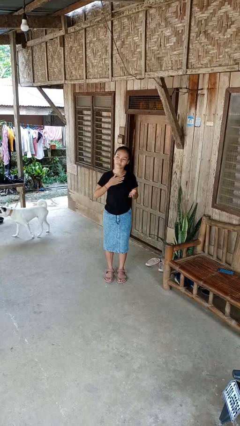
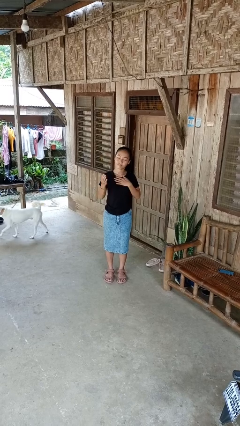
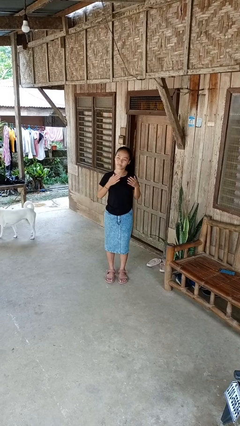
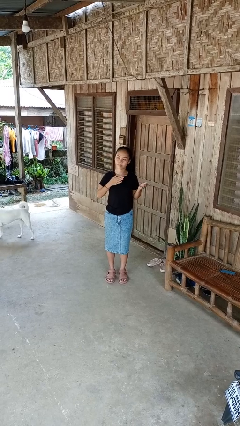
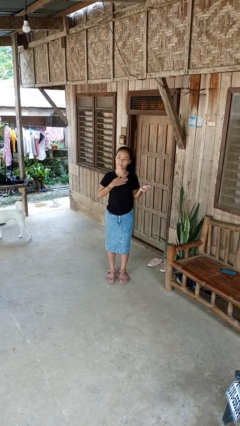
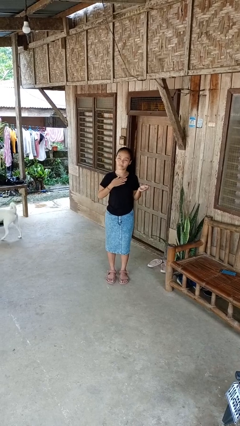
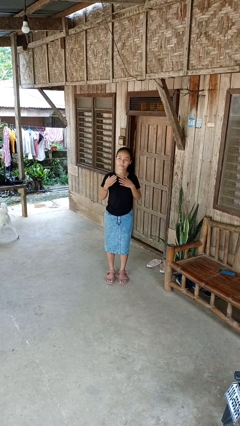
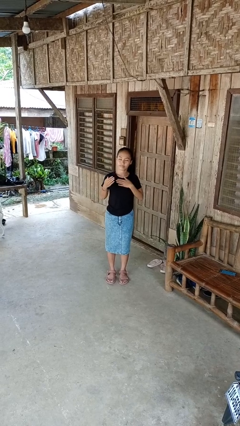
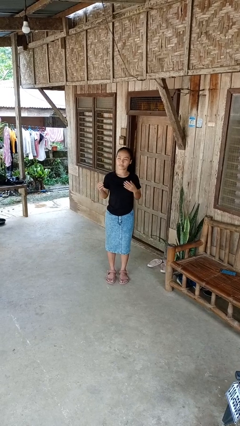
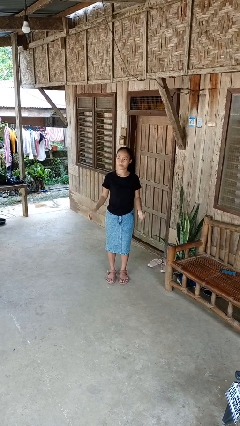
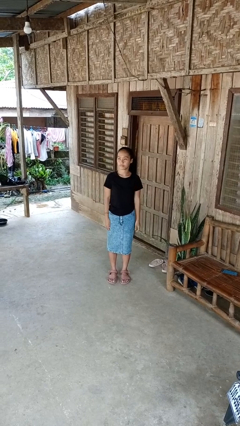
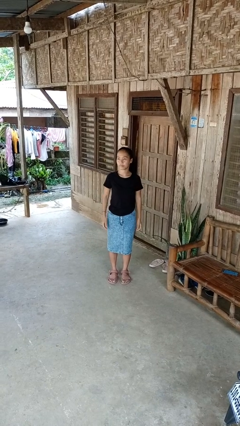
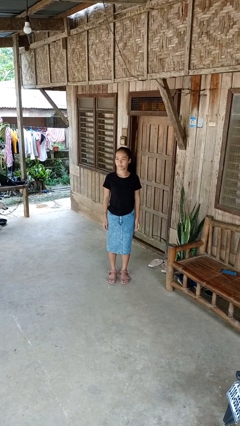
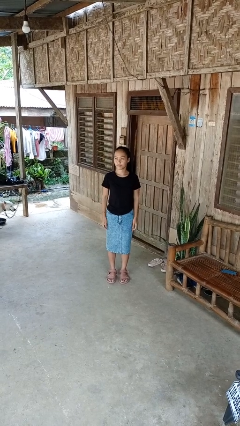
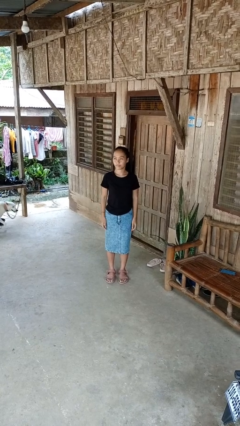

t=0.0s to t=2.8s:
person drums on chest

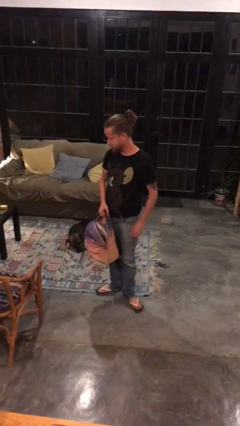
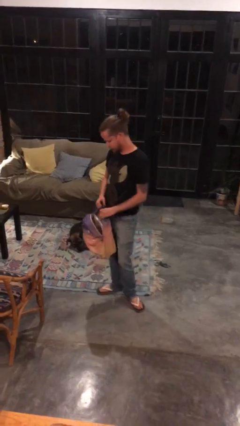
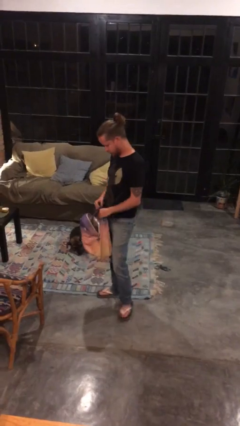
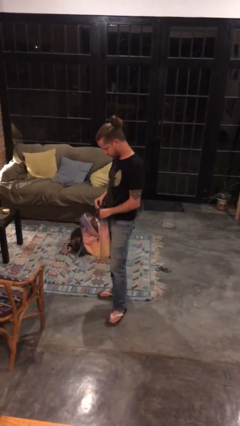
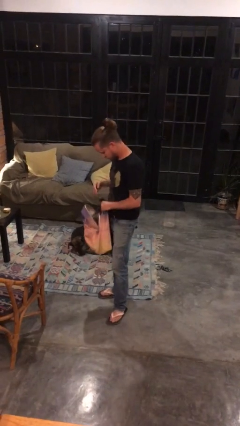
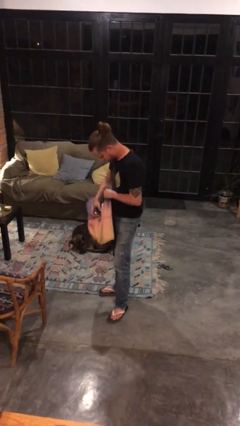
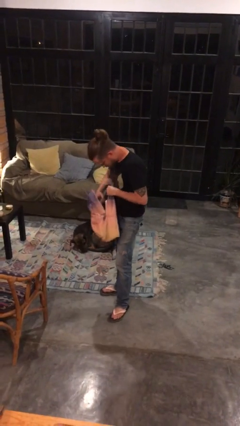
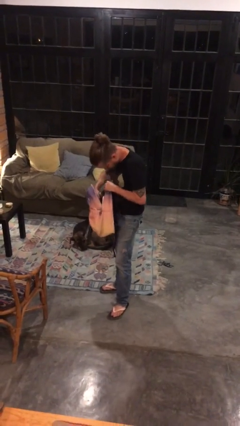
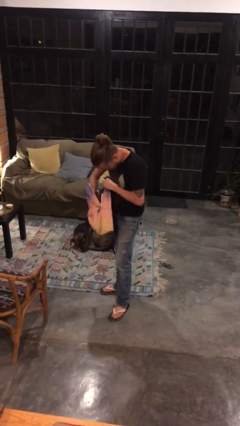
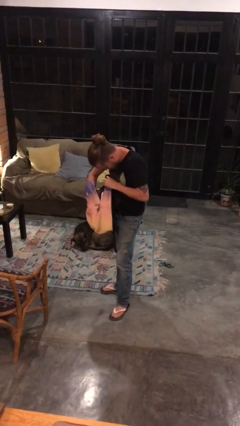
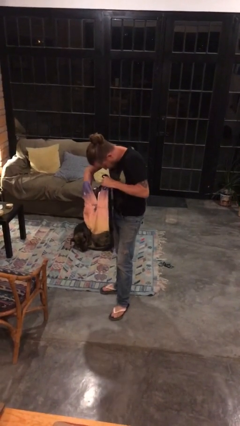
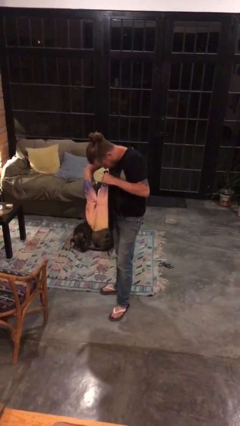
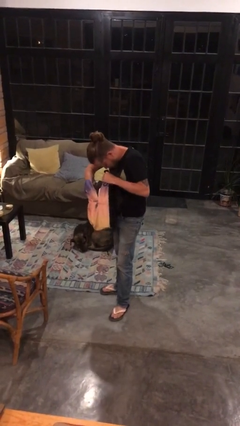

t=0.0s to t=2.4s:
person searches in backpack

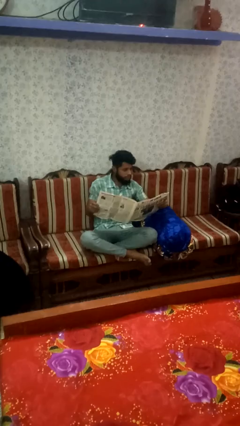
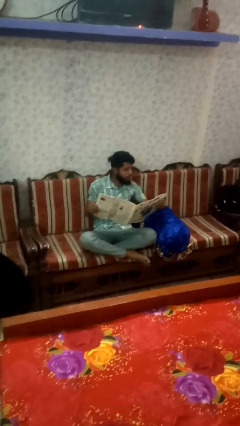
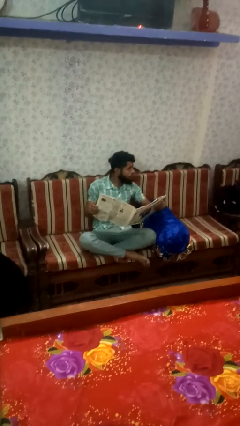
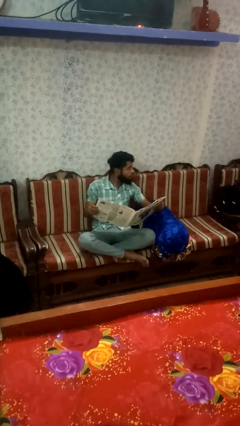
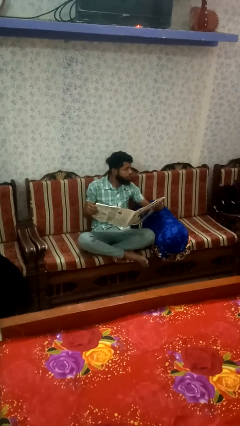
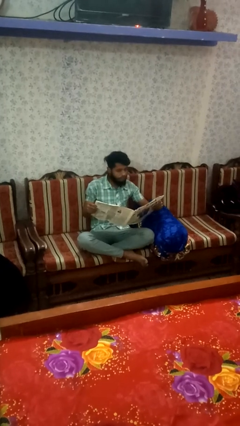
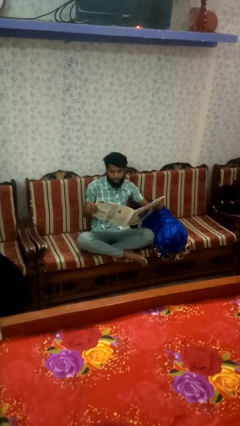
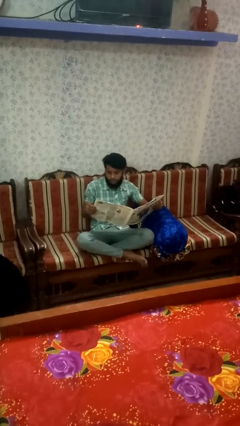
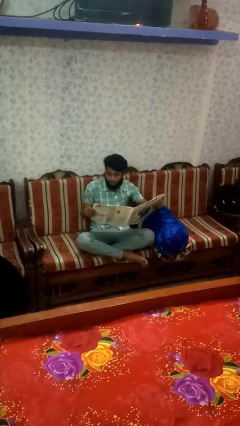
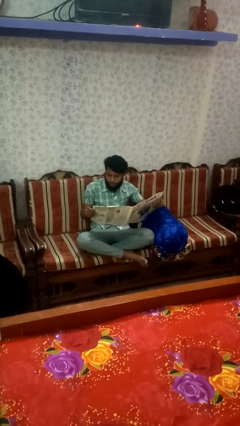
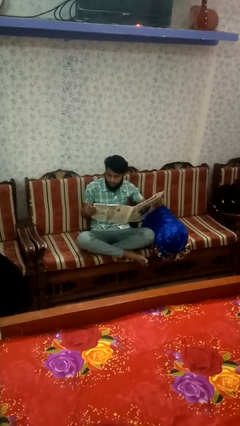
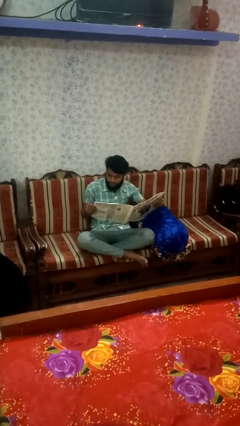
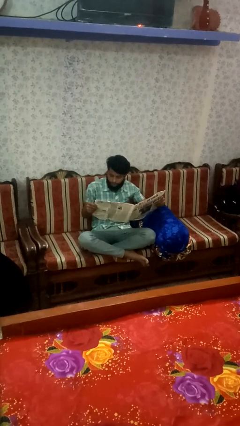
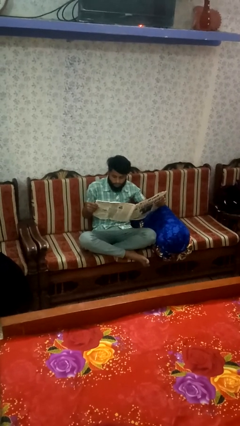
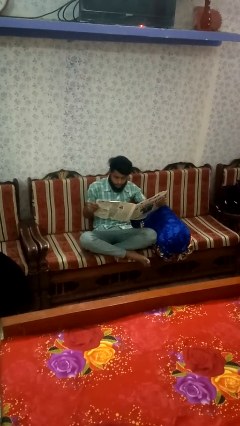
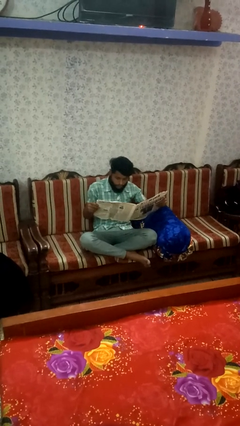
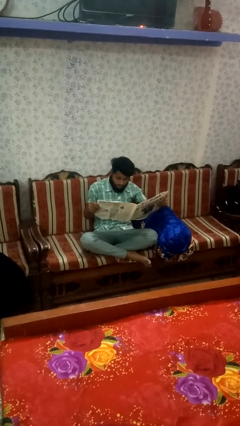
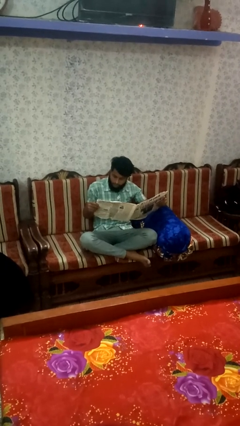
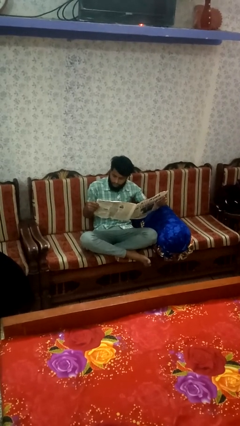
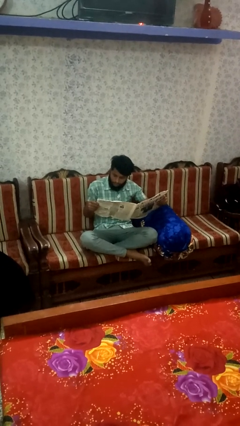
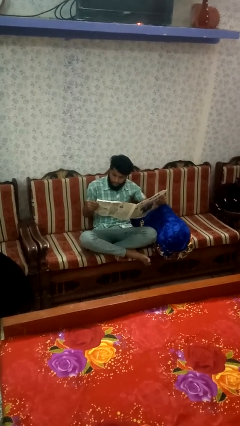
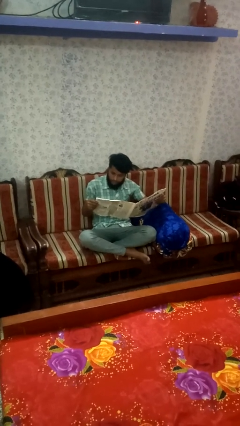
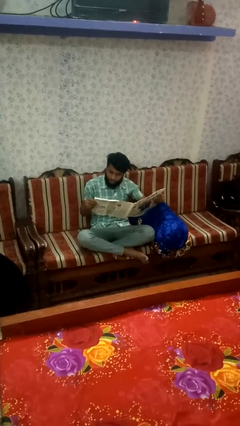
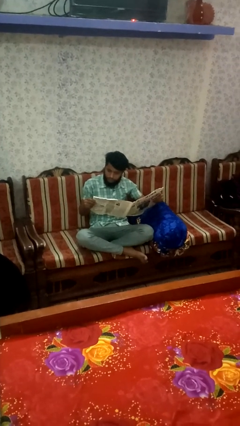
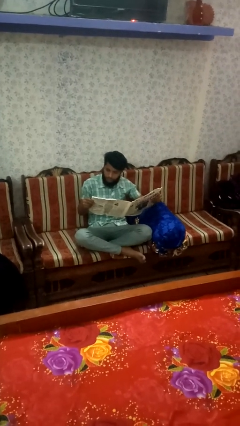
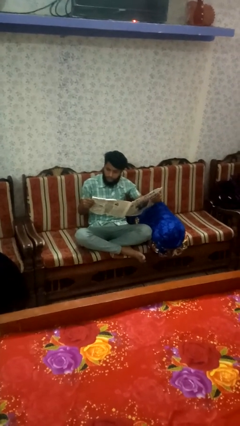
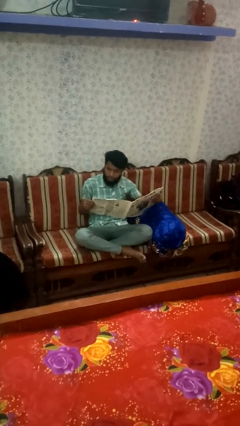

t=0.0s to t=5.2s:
person reads newspaper

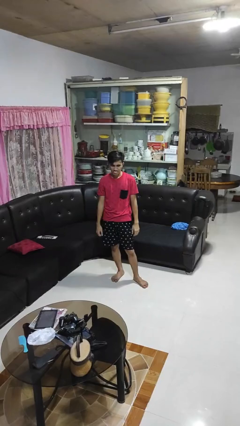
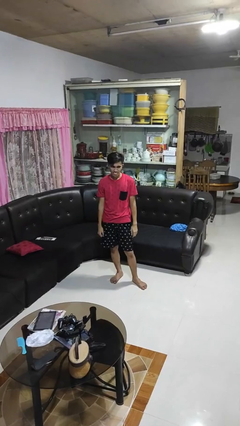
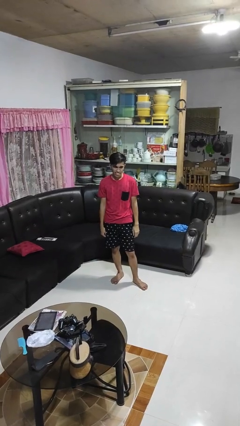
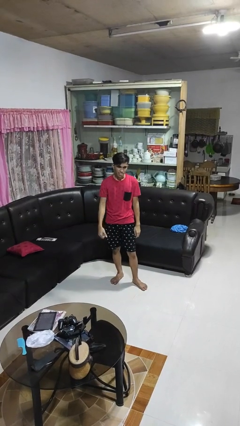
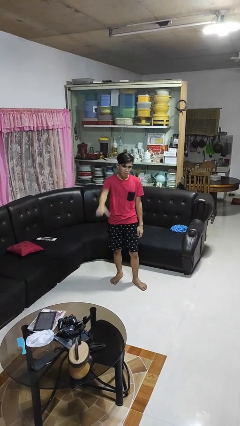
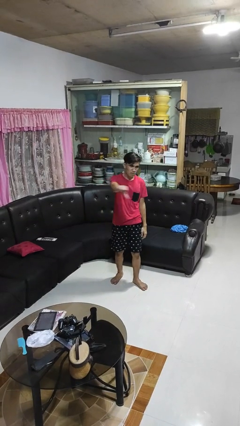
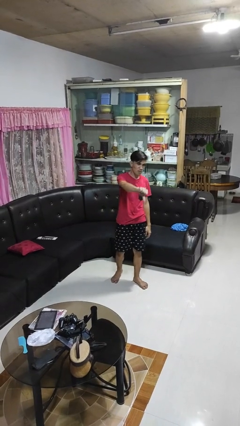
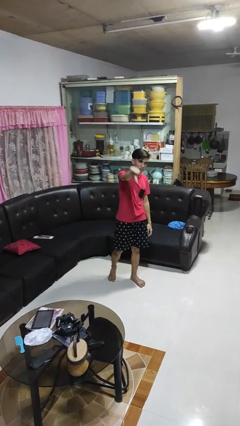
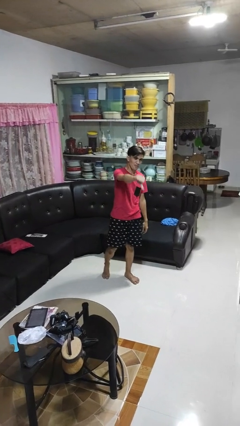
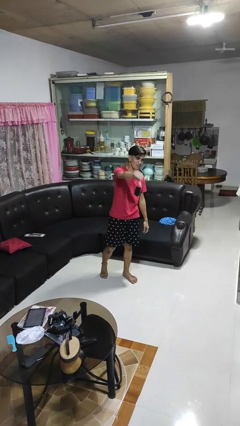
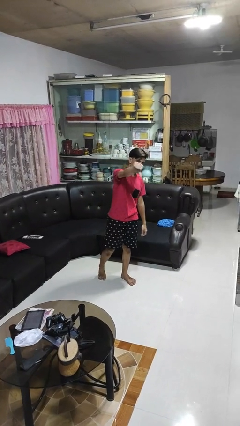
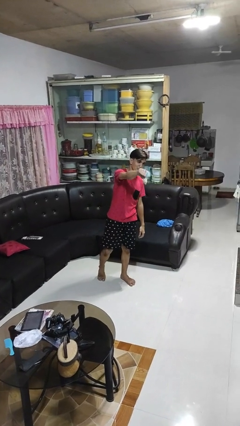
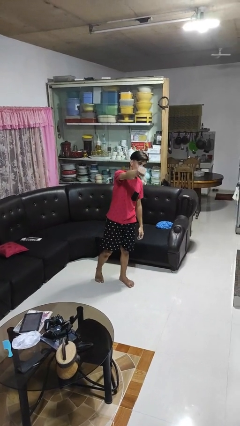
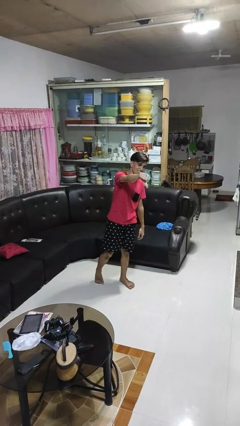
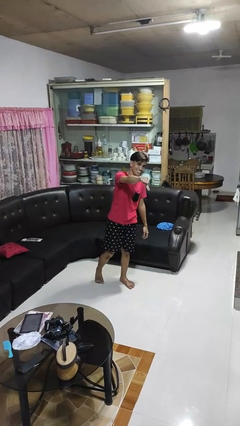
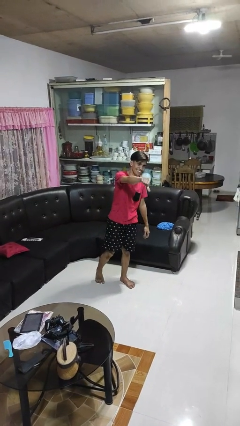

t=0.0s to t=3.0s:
person gestures thumbs down

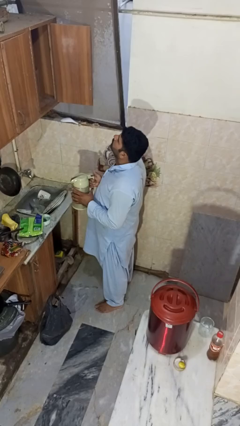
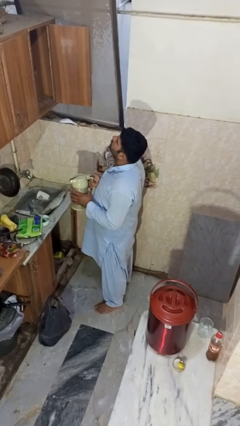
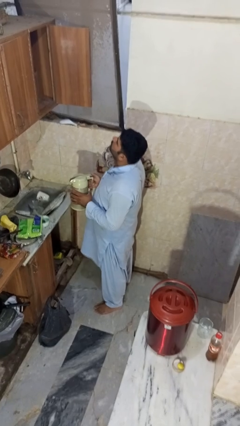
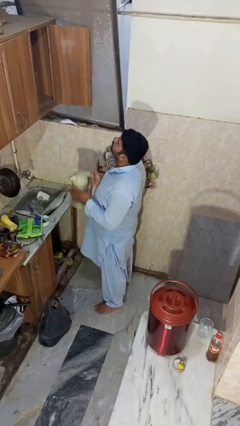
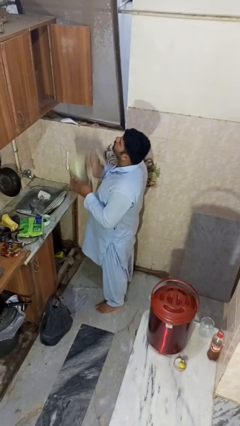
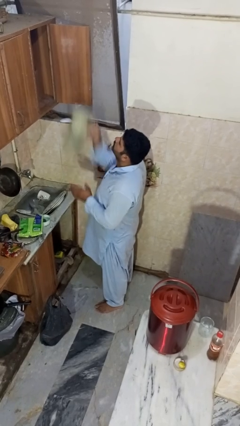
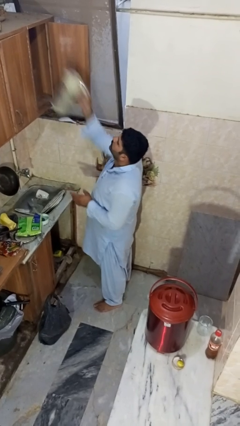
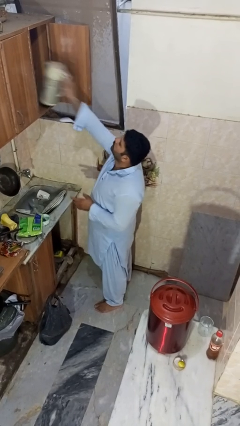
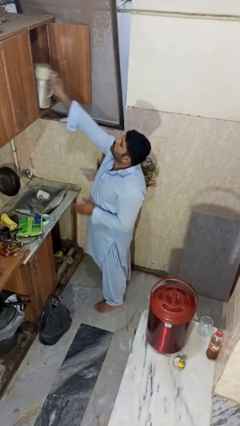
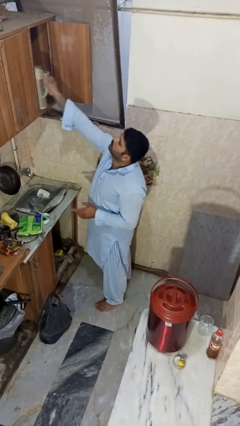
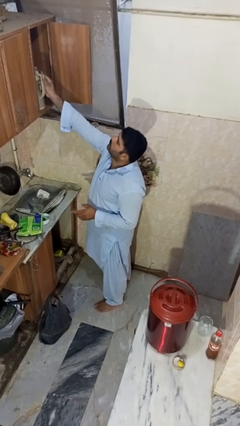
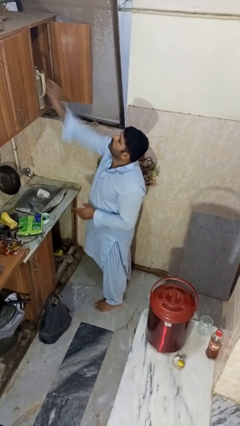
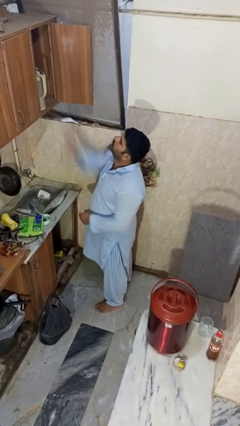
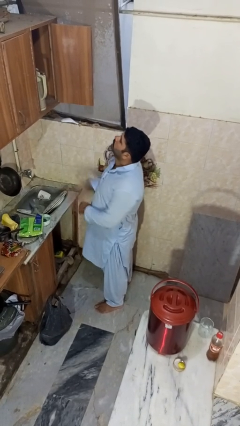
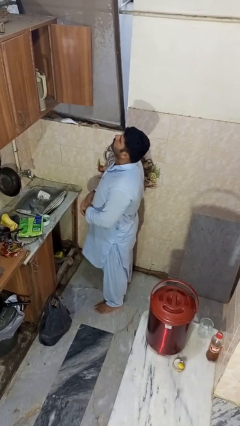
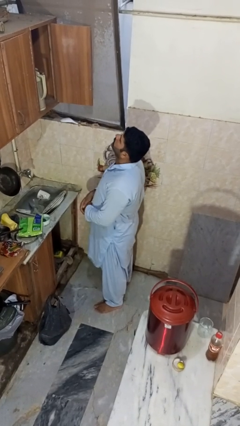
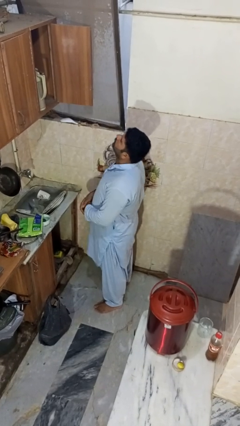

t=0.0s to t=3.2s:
person puts object in cabinet

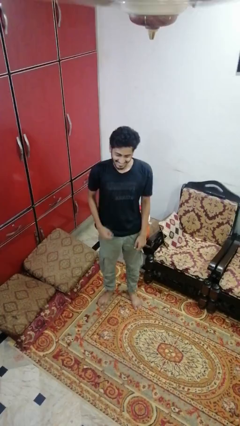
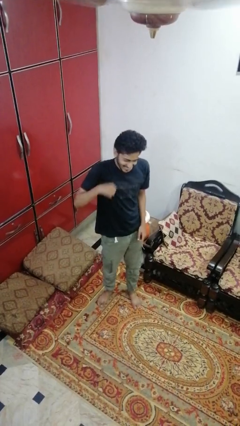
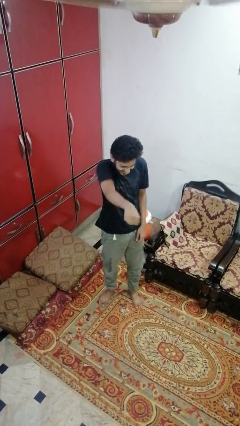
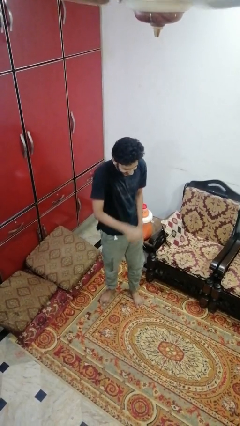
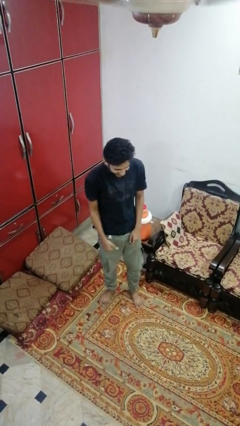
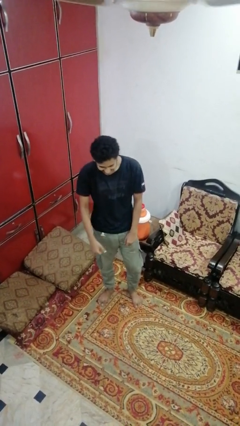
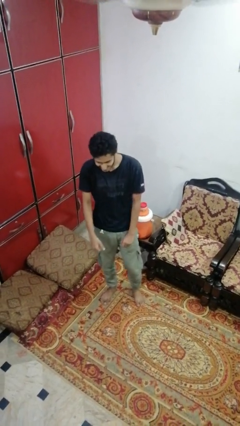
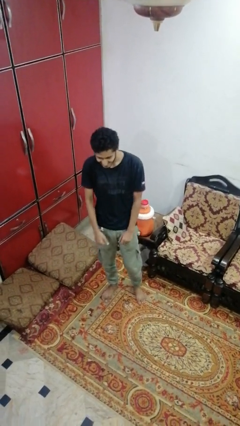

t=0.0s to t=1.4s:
person punches
